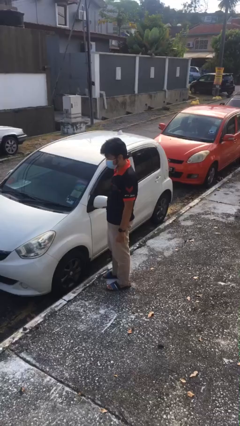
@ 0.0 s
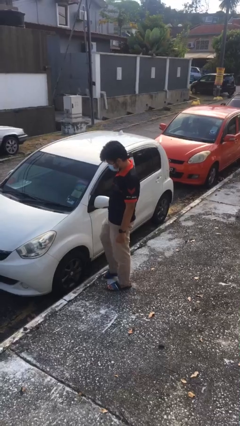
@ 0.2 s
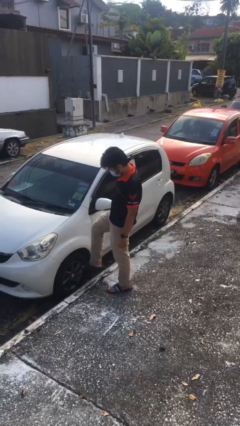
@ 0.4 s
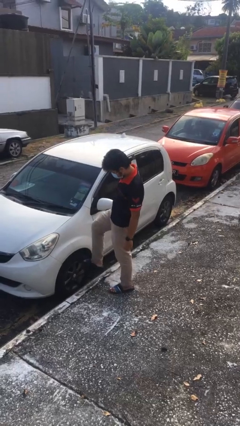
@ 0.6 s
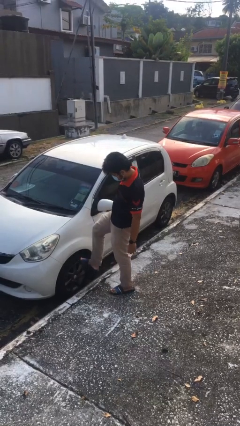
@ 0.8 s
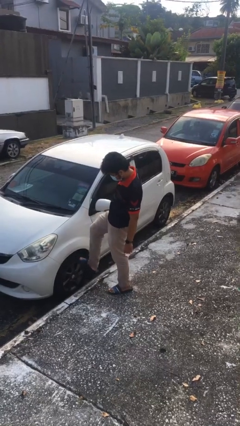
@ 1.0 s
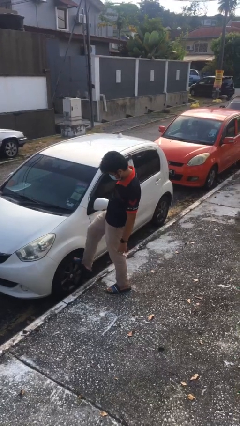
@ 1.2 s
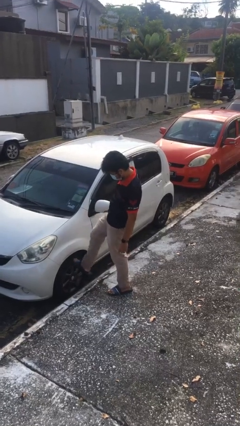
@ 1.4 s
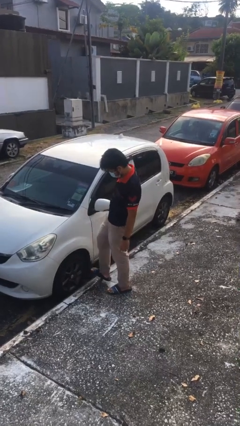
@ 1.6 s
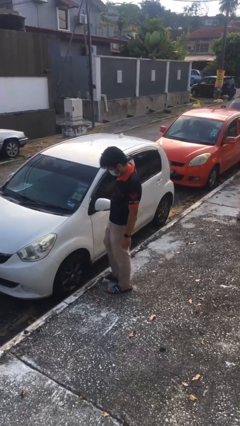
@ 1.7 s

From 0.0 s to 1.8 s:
person kicks car tires

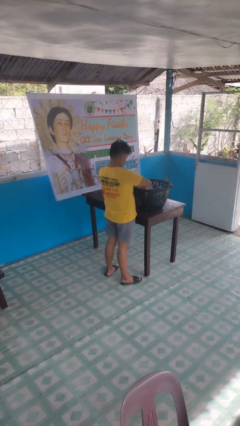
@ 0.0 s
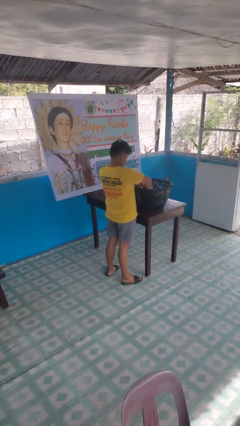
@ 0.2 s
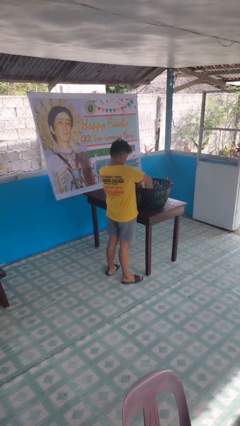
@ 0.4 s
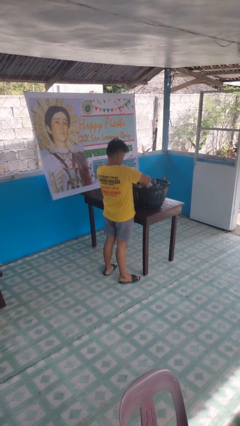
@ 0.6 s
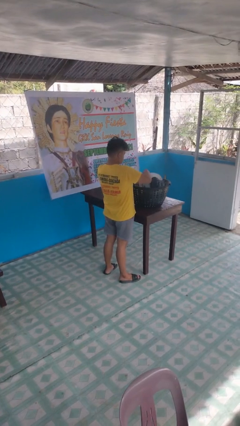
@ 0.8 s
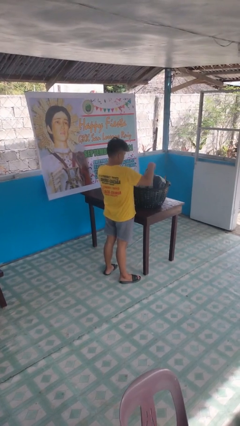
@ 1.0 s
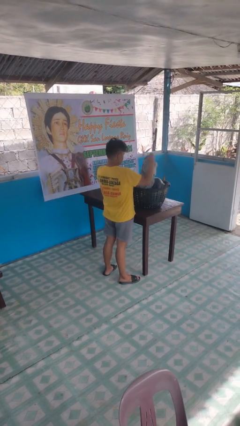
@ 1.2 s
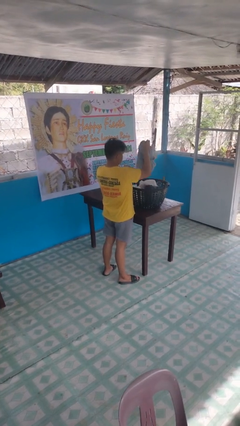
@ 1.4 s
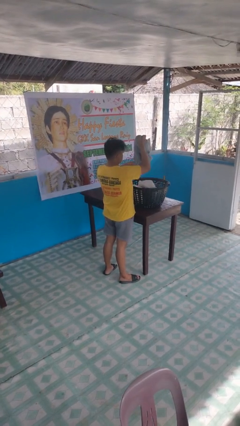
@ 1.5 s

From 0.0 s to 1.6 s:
person takes object from basket

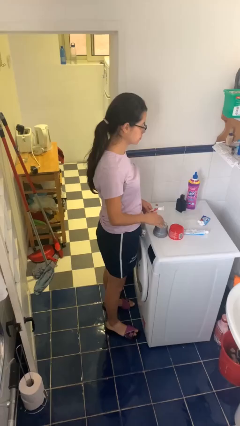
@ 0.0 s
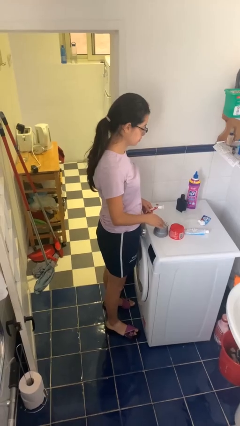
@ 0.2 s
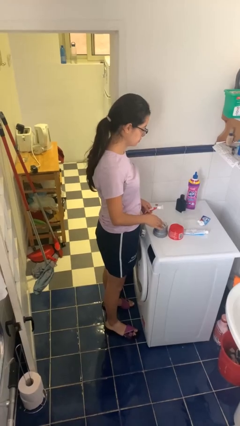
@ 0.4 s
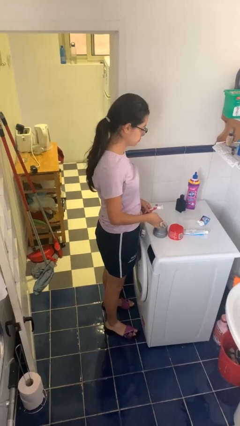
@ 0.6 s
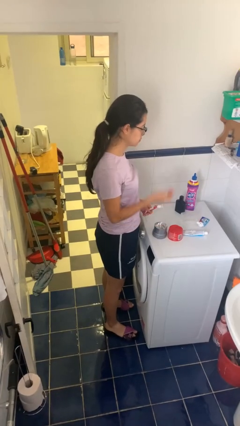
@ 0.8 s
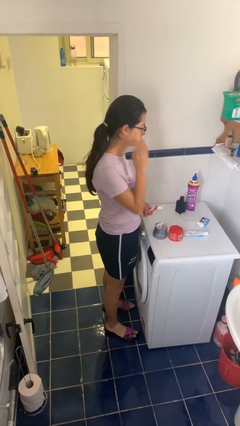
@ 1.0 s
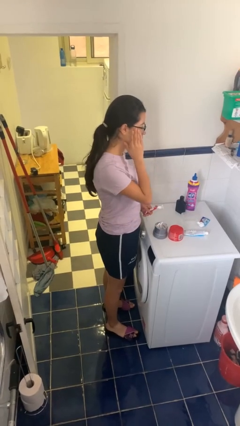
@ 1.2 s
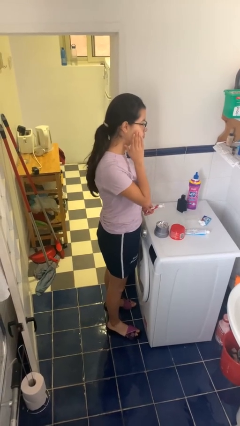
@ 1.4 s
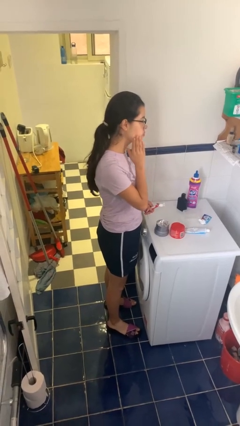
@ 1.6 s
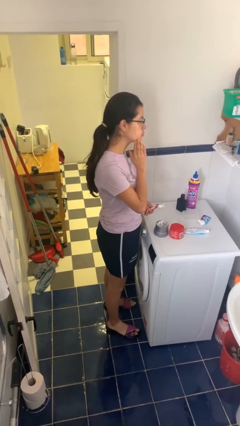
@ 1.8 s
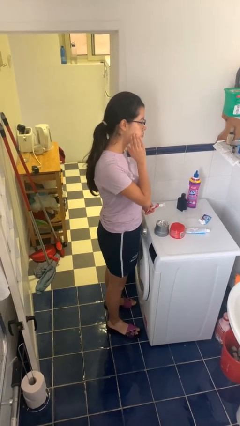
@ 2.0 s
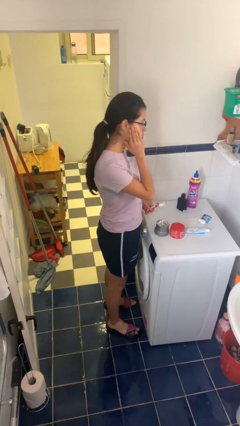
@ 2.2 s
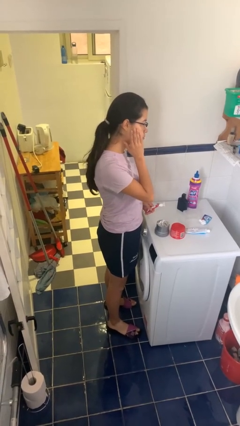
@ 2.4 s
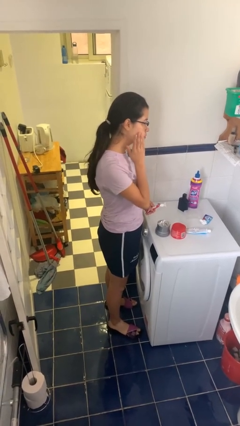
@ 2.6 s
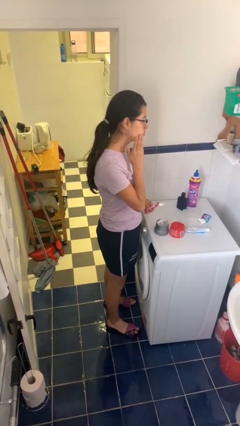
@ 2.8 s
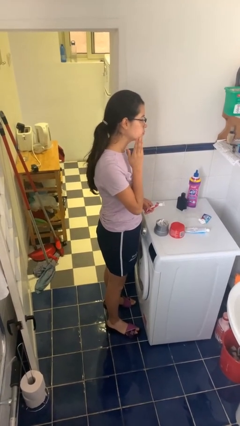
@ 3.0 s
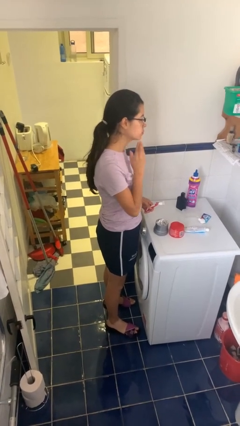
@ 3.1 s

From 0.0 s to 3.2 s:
person applies shaving cream

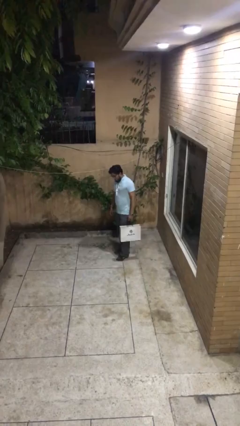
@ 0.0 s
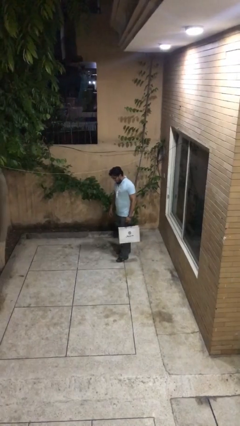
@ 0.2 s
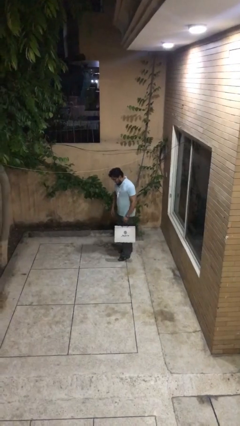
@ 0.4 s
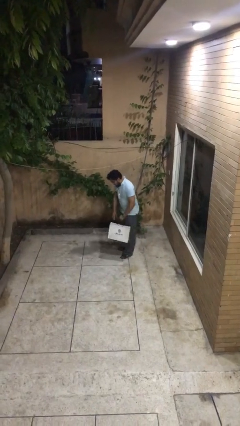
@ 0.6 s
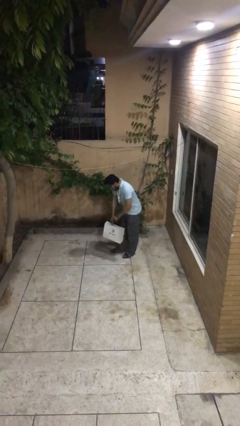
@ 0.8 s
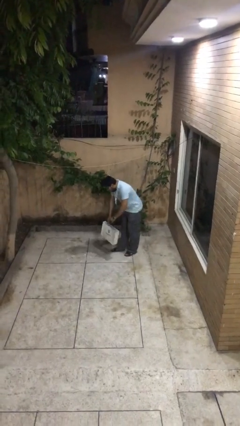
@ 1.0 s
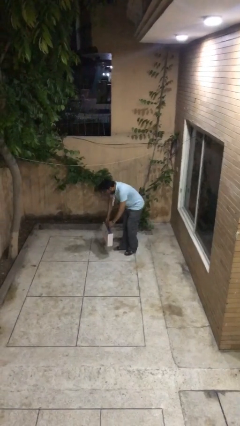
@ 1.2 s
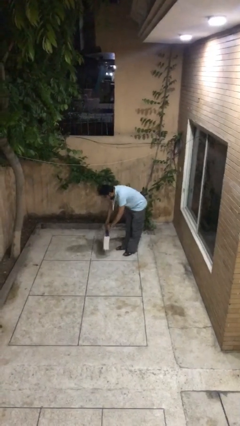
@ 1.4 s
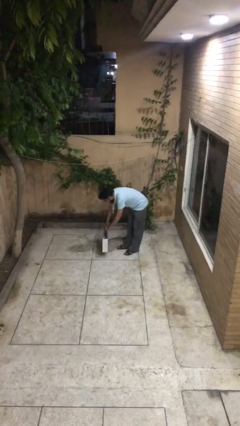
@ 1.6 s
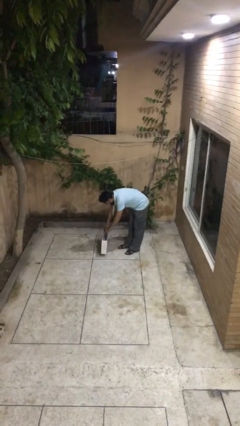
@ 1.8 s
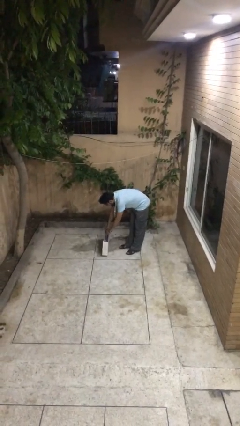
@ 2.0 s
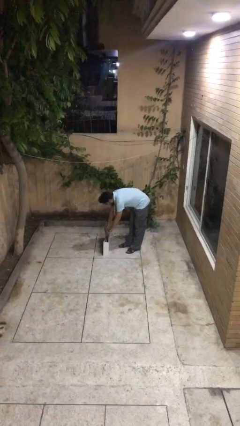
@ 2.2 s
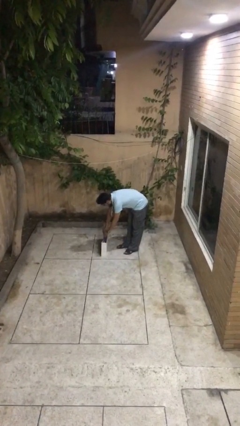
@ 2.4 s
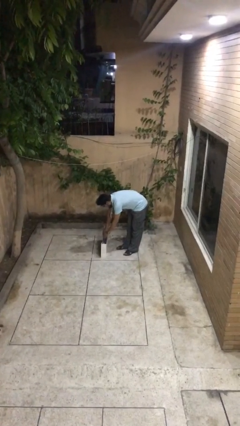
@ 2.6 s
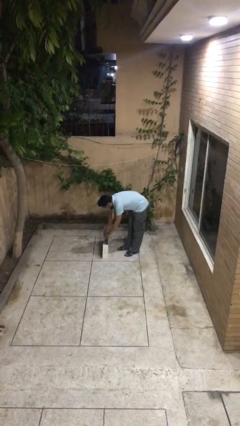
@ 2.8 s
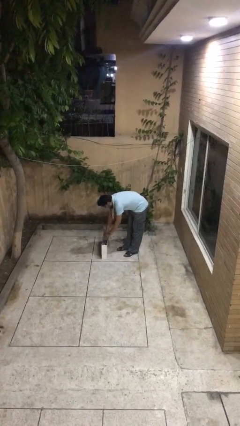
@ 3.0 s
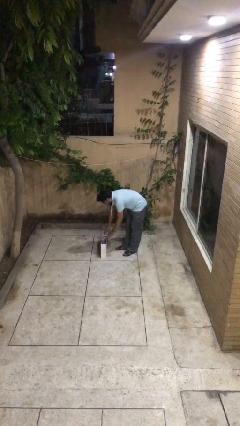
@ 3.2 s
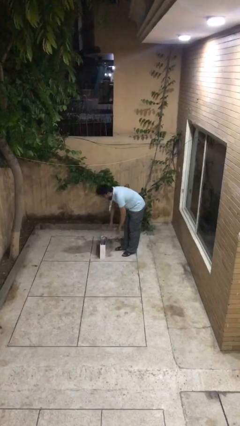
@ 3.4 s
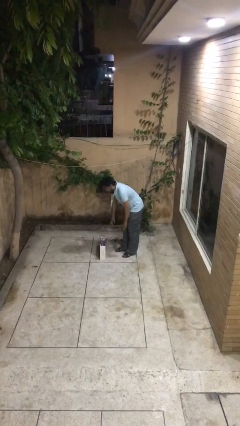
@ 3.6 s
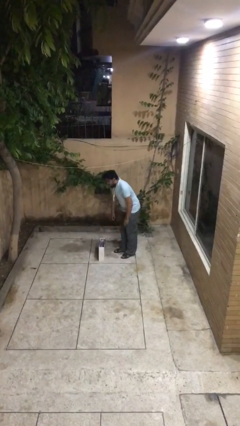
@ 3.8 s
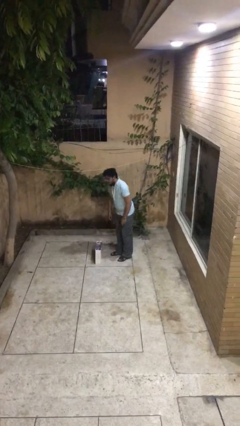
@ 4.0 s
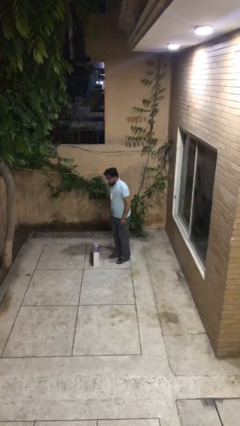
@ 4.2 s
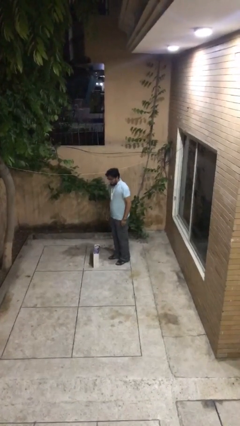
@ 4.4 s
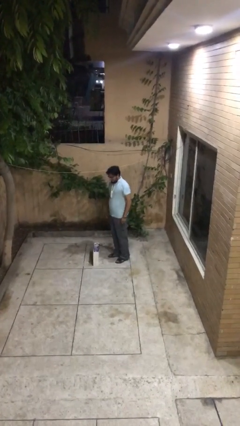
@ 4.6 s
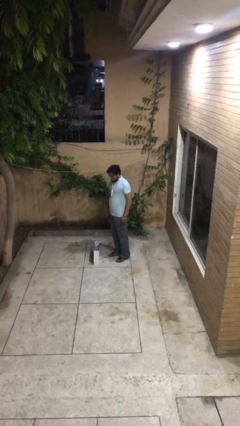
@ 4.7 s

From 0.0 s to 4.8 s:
person puts down object on floor

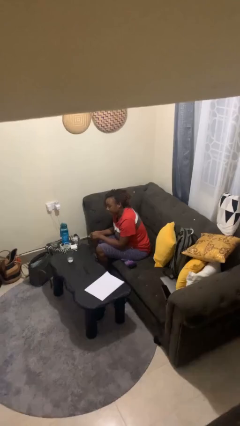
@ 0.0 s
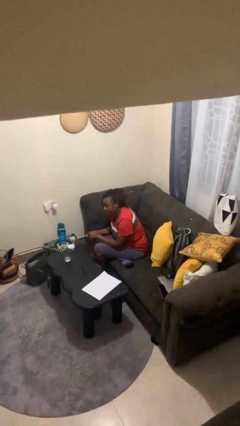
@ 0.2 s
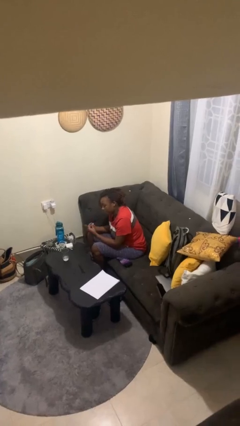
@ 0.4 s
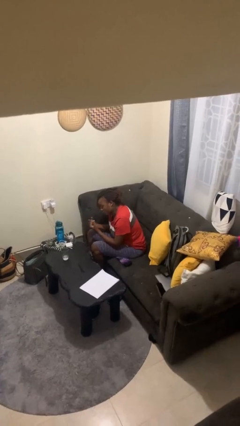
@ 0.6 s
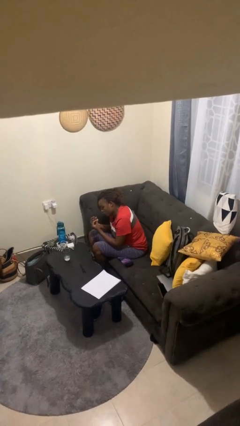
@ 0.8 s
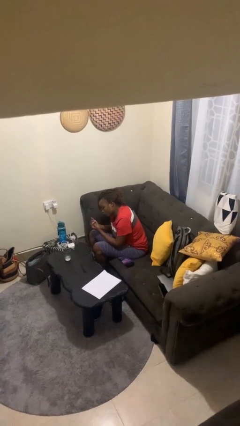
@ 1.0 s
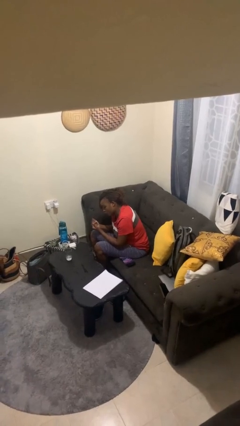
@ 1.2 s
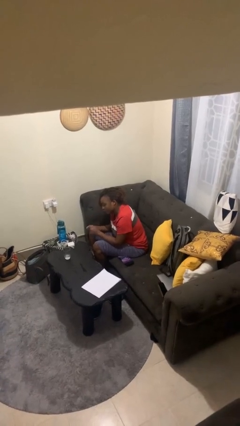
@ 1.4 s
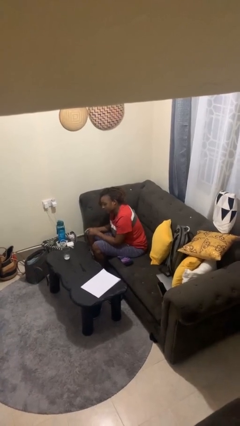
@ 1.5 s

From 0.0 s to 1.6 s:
person snaps fingers

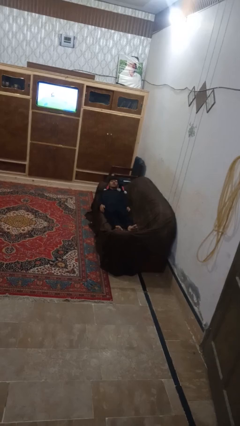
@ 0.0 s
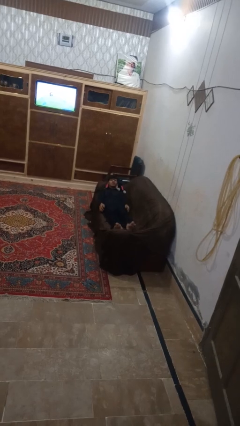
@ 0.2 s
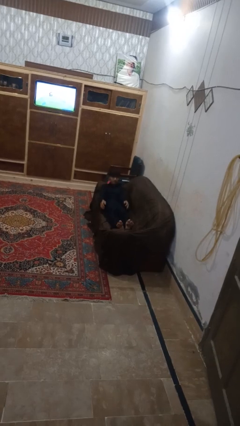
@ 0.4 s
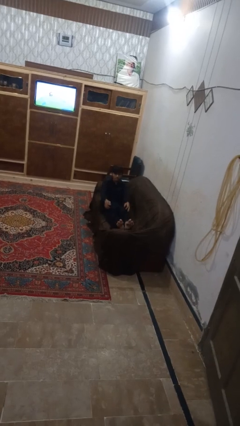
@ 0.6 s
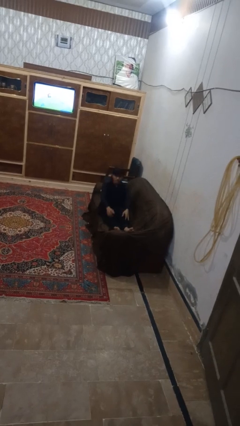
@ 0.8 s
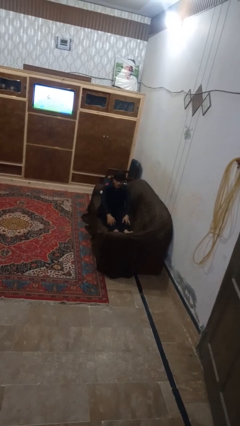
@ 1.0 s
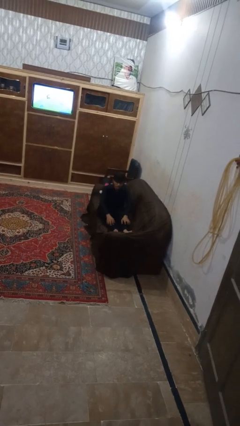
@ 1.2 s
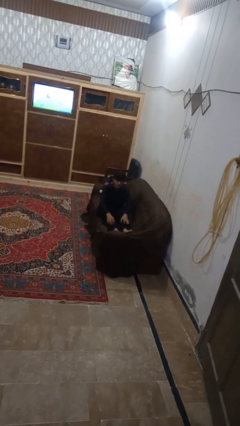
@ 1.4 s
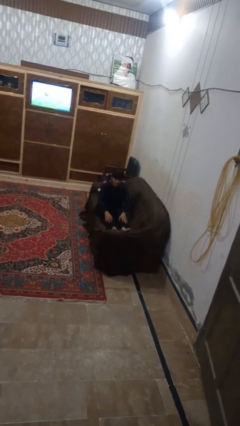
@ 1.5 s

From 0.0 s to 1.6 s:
person stands up

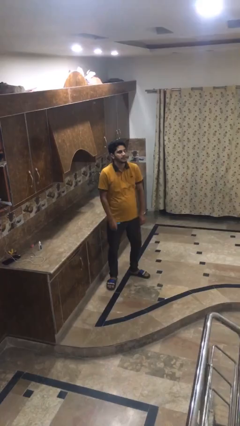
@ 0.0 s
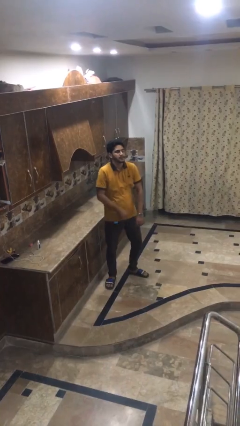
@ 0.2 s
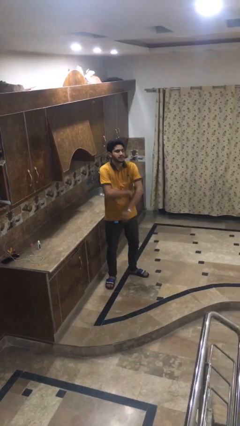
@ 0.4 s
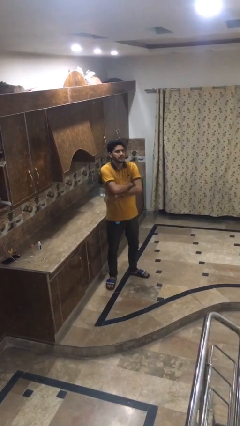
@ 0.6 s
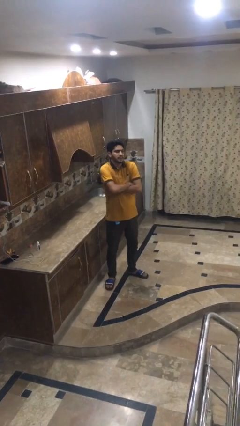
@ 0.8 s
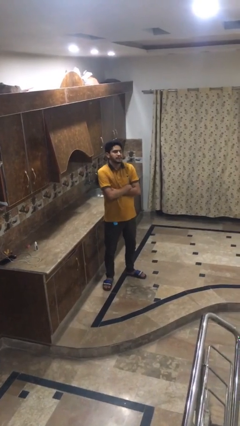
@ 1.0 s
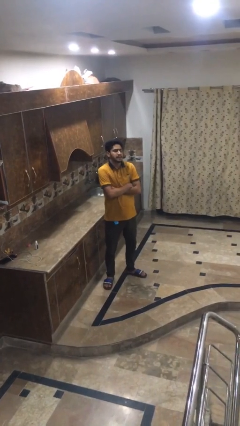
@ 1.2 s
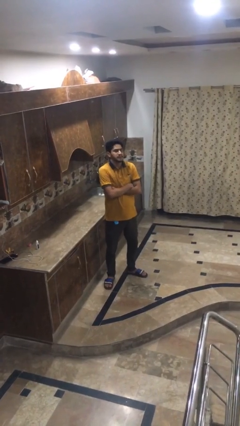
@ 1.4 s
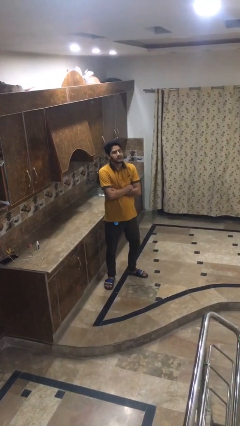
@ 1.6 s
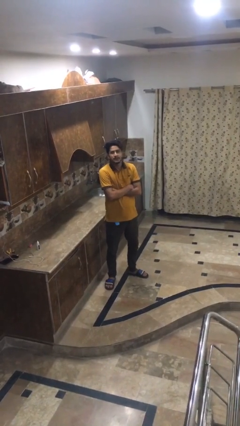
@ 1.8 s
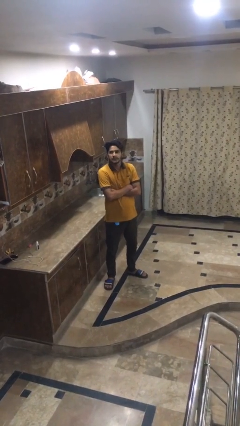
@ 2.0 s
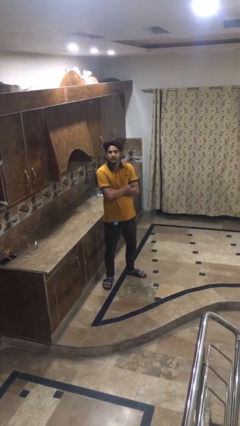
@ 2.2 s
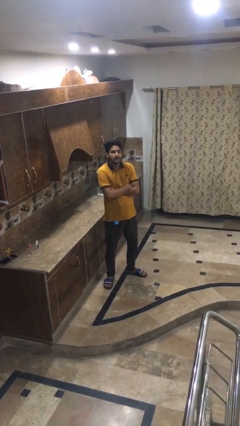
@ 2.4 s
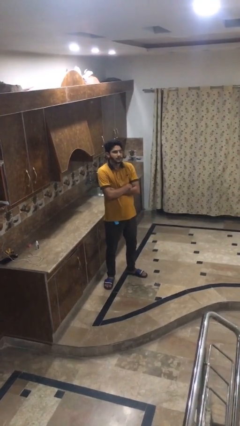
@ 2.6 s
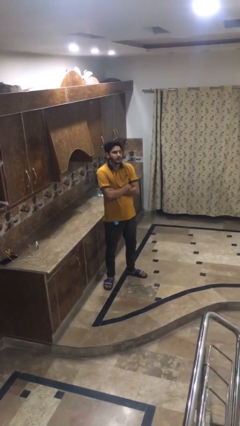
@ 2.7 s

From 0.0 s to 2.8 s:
person crosses arms
